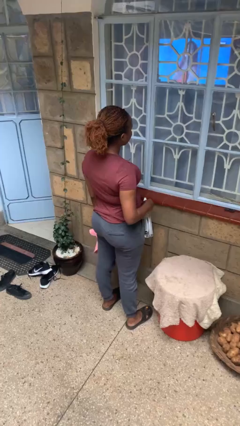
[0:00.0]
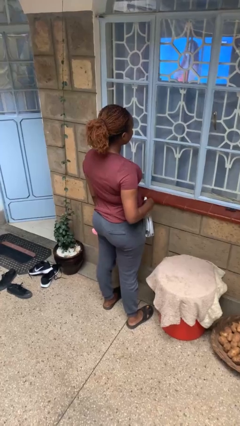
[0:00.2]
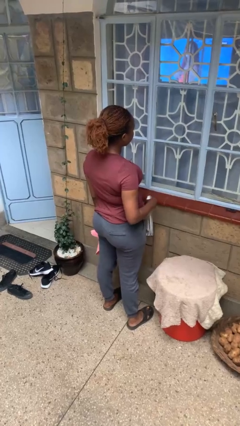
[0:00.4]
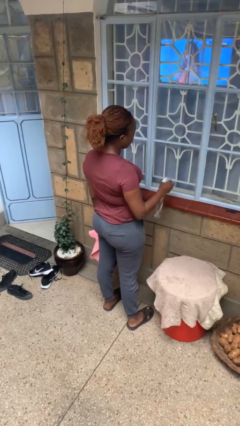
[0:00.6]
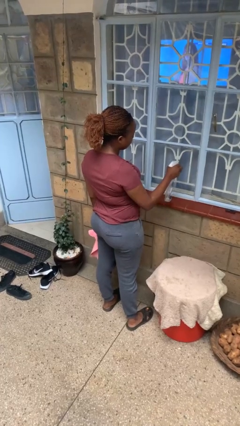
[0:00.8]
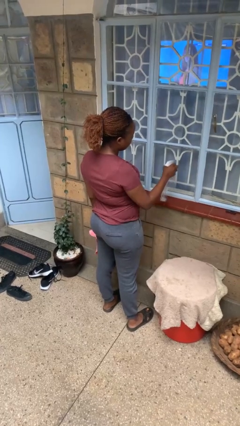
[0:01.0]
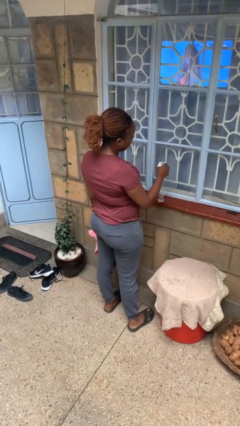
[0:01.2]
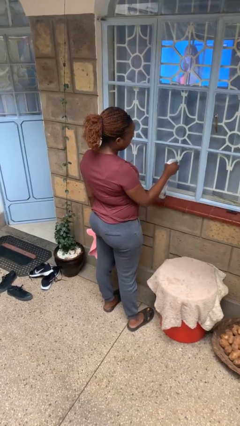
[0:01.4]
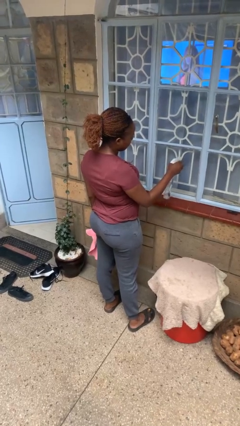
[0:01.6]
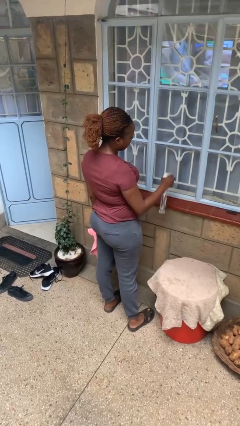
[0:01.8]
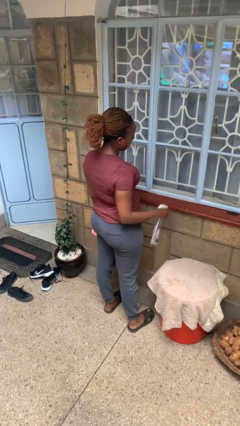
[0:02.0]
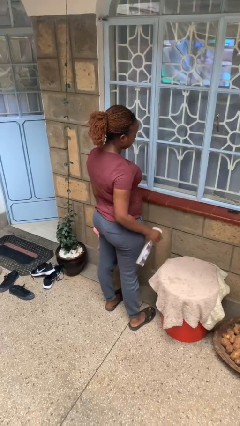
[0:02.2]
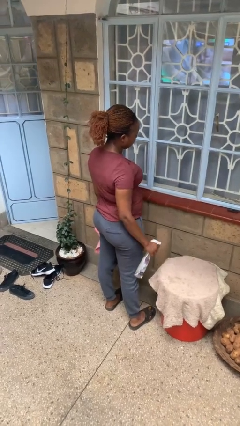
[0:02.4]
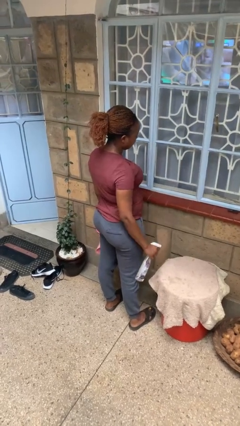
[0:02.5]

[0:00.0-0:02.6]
person sprays from bottle

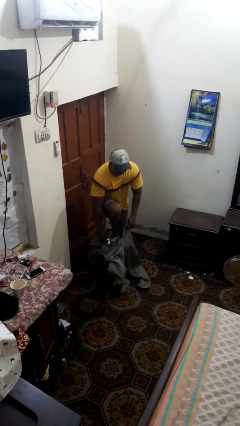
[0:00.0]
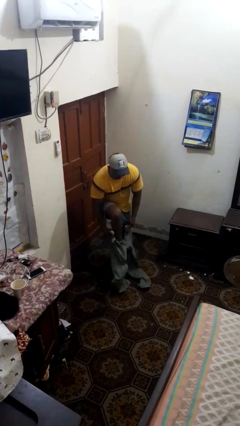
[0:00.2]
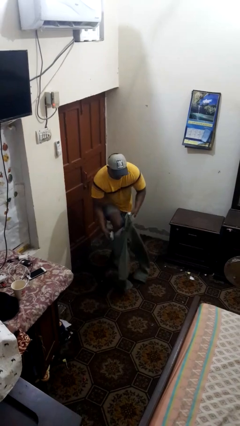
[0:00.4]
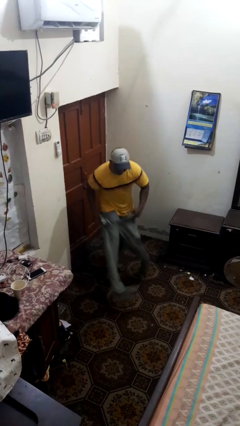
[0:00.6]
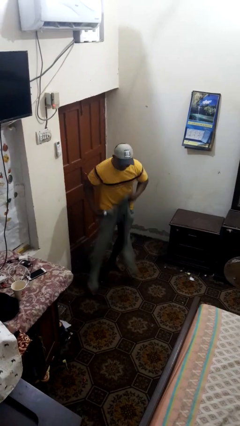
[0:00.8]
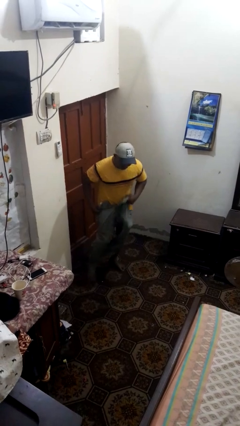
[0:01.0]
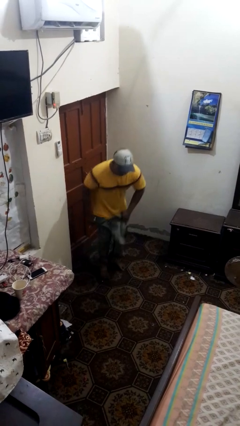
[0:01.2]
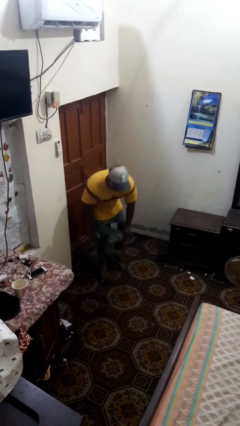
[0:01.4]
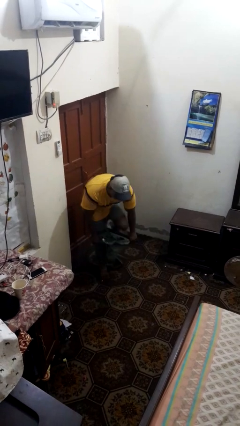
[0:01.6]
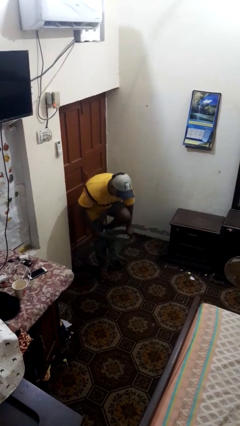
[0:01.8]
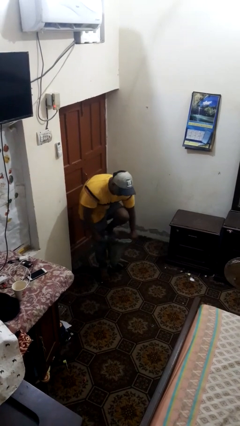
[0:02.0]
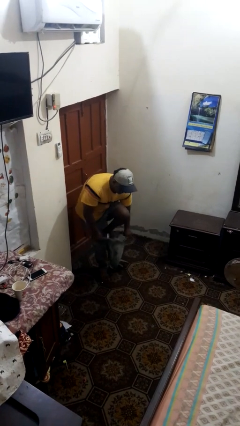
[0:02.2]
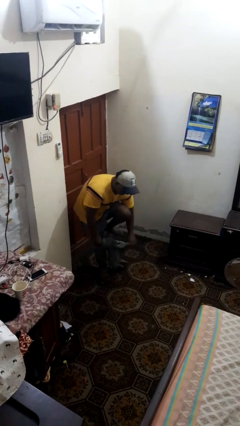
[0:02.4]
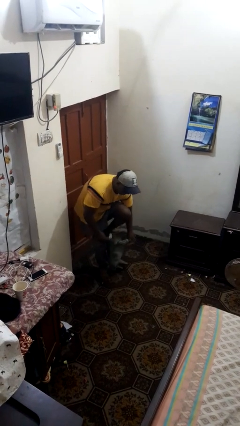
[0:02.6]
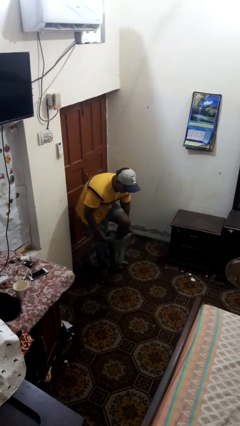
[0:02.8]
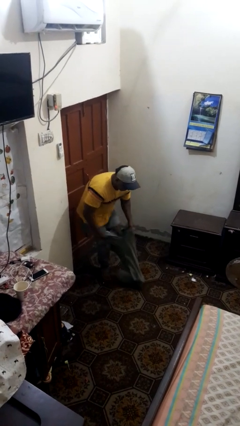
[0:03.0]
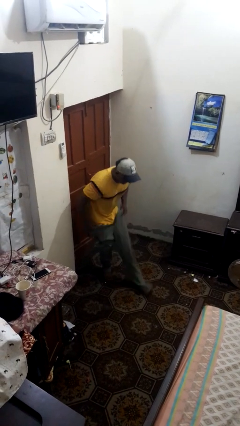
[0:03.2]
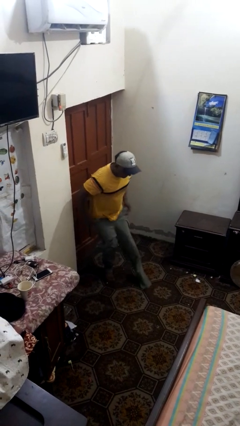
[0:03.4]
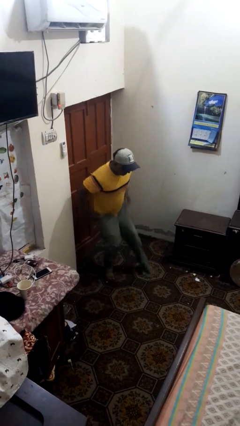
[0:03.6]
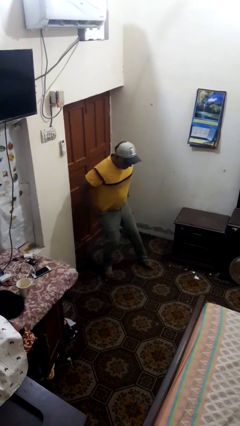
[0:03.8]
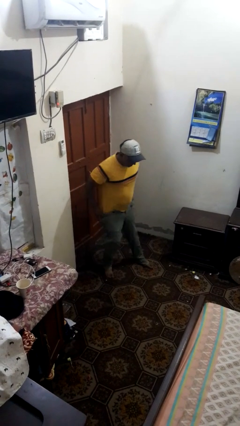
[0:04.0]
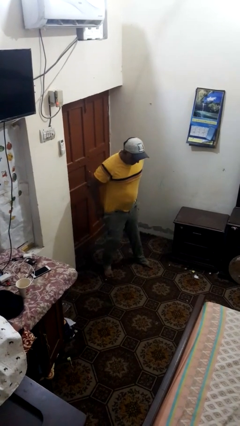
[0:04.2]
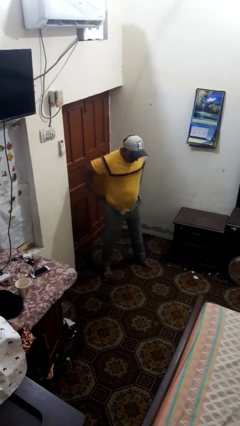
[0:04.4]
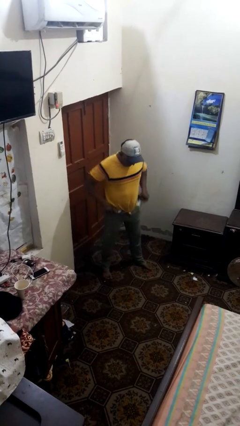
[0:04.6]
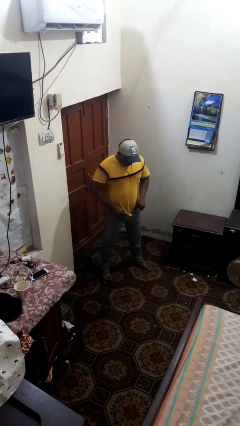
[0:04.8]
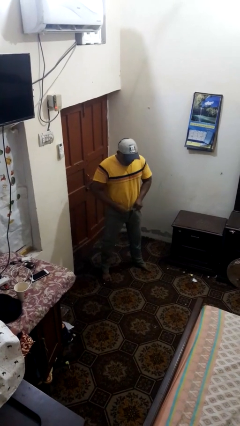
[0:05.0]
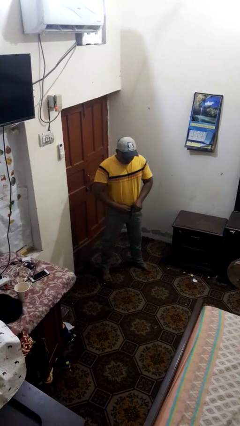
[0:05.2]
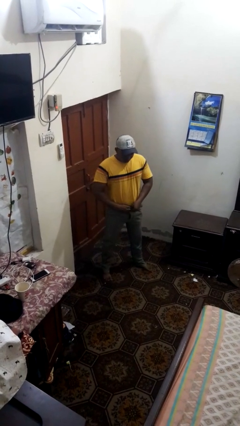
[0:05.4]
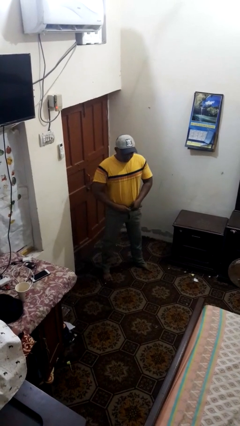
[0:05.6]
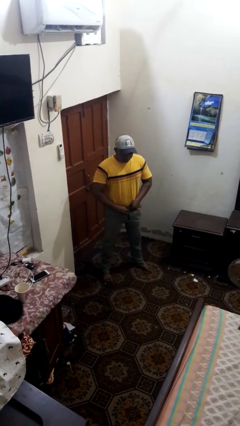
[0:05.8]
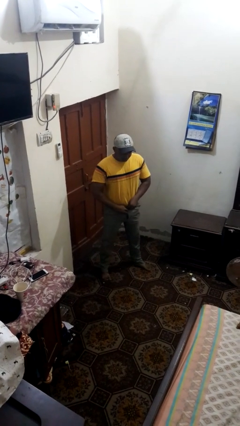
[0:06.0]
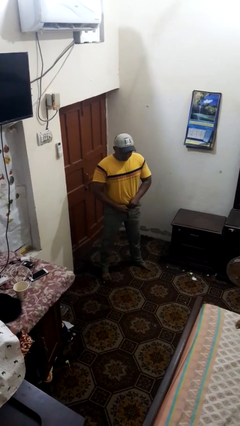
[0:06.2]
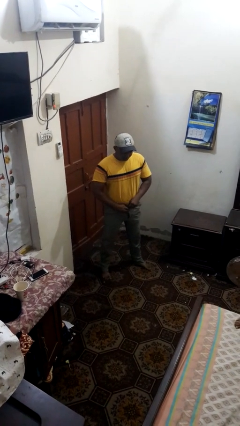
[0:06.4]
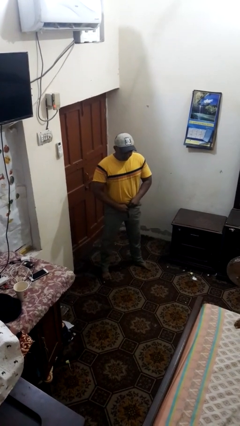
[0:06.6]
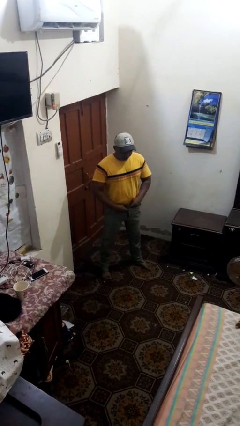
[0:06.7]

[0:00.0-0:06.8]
person puts on pants

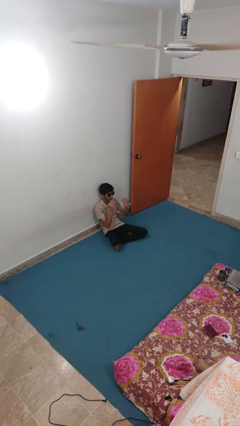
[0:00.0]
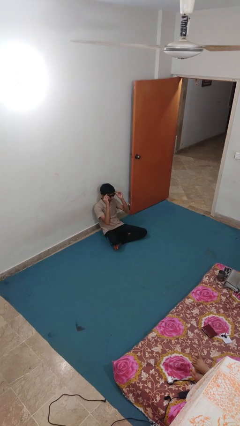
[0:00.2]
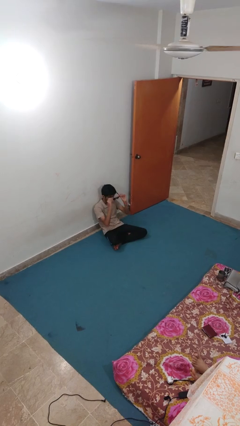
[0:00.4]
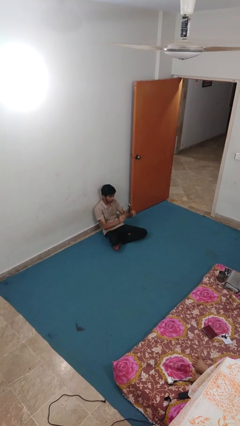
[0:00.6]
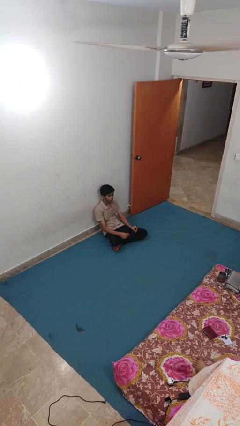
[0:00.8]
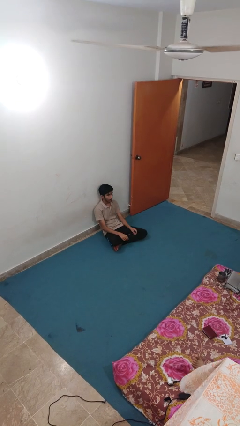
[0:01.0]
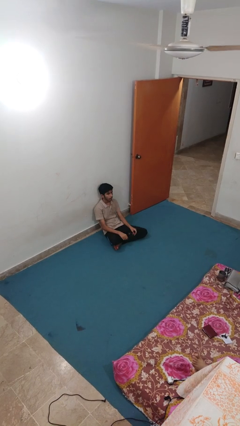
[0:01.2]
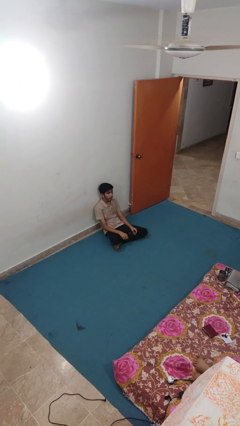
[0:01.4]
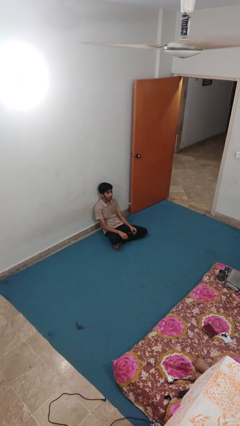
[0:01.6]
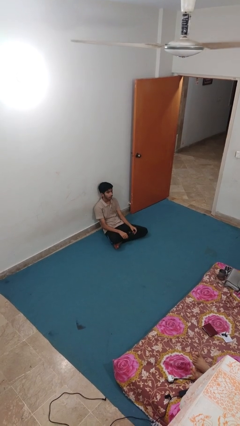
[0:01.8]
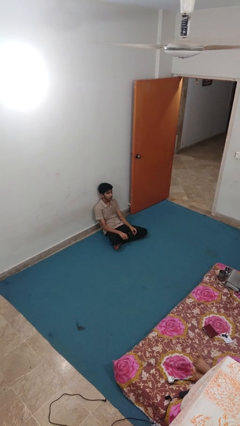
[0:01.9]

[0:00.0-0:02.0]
person takes off sunglasses

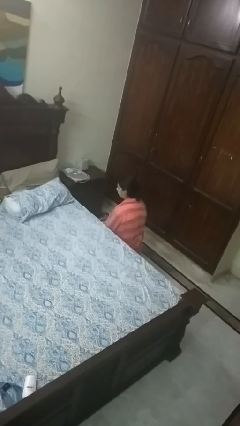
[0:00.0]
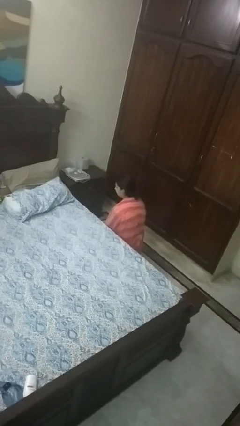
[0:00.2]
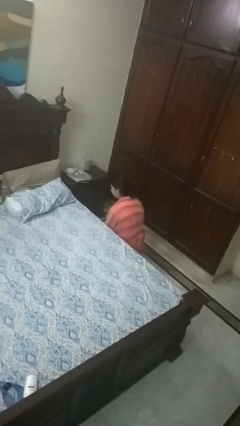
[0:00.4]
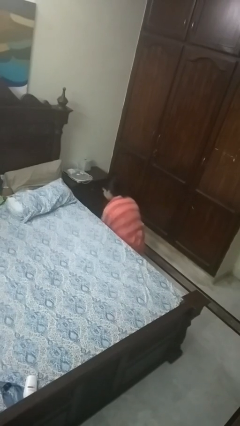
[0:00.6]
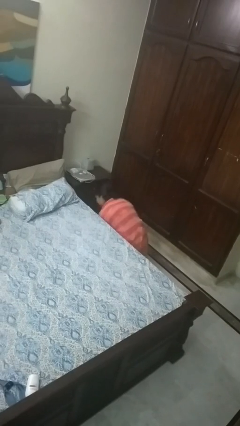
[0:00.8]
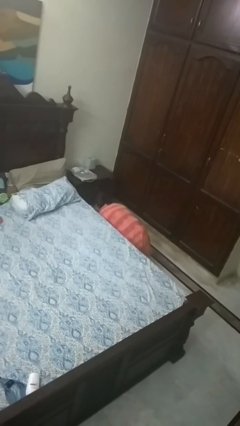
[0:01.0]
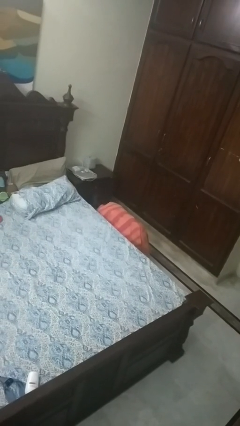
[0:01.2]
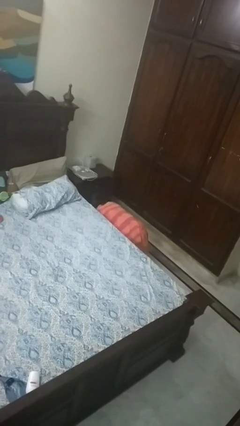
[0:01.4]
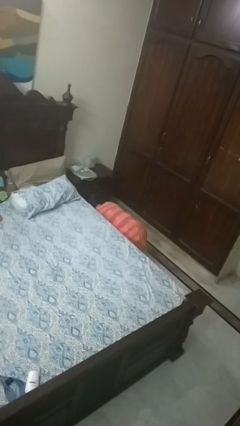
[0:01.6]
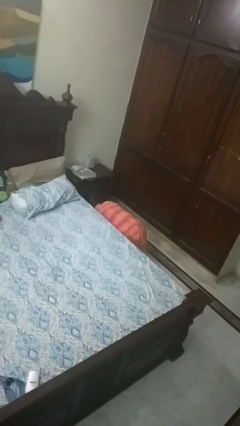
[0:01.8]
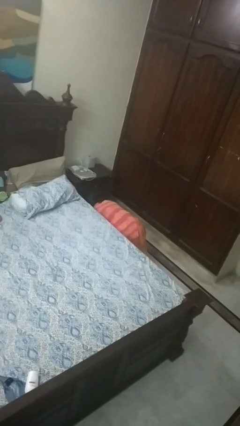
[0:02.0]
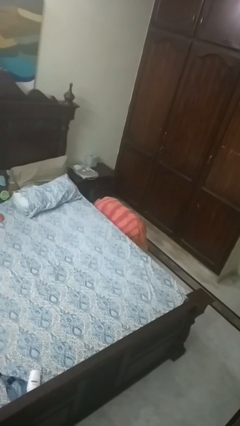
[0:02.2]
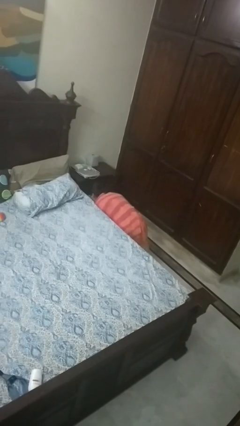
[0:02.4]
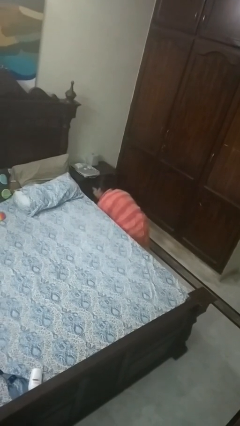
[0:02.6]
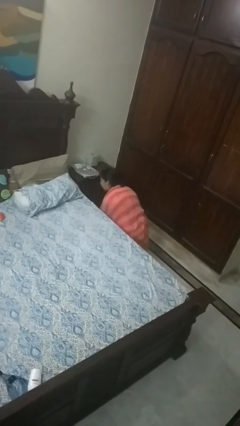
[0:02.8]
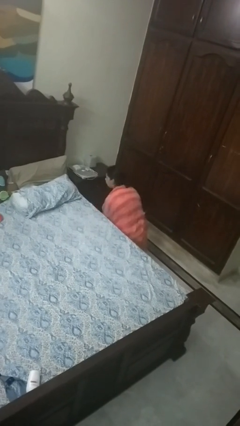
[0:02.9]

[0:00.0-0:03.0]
person searches under bed

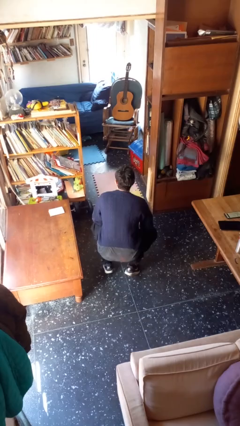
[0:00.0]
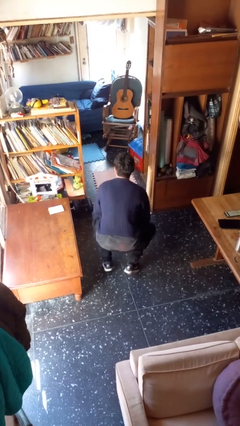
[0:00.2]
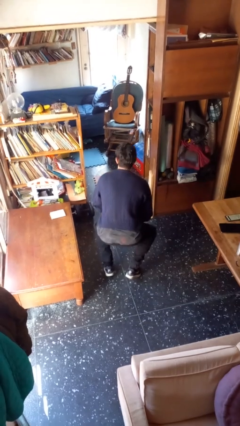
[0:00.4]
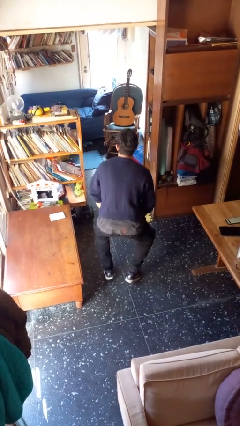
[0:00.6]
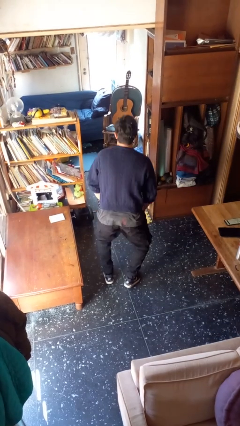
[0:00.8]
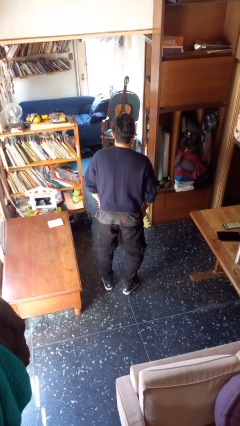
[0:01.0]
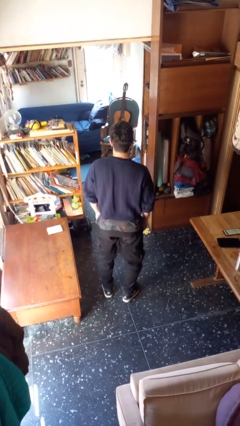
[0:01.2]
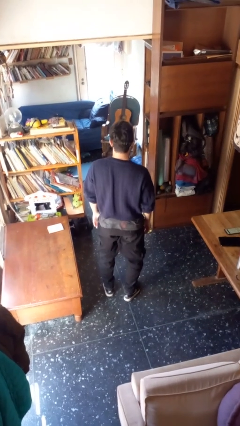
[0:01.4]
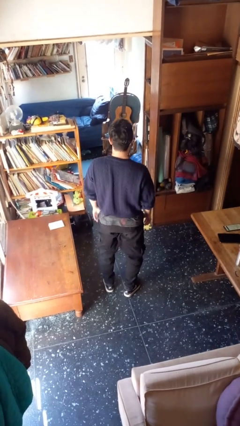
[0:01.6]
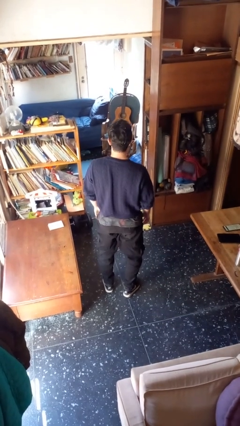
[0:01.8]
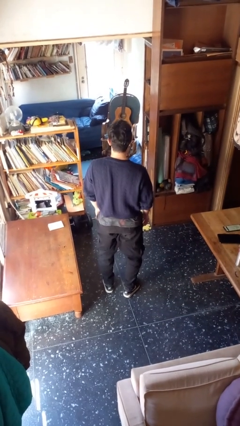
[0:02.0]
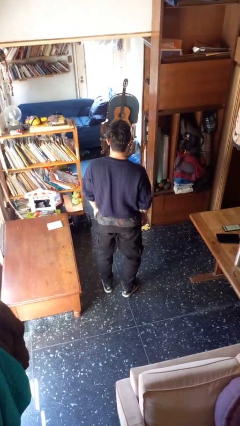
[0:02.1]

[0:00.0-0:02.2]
person stands up

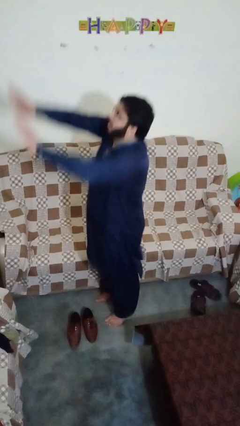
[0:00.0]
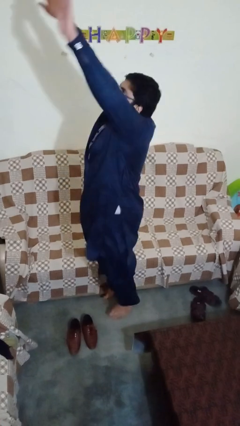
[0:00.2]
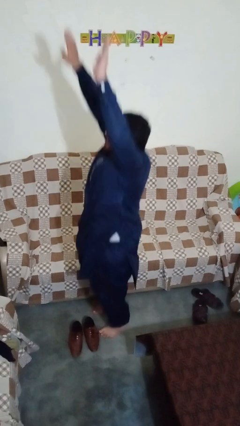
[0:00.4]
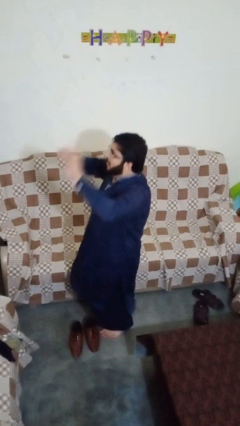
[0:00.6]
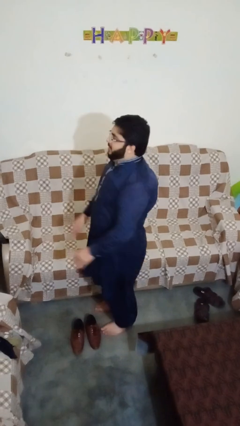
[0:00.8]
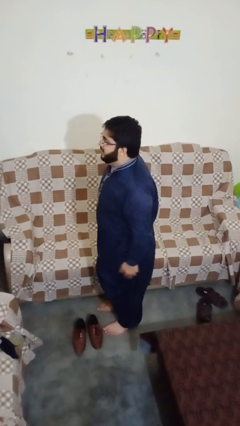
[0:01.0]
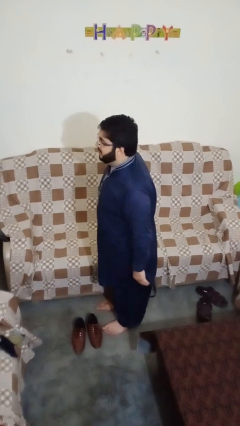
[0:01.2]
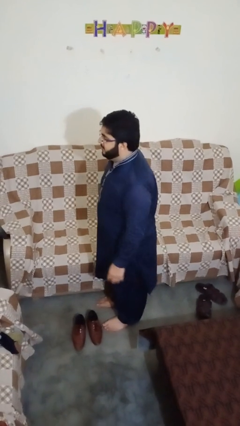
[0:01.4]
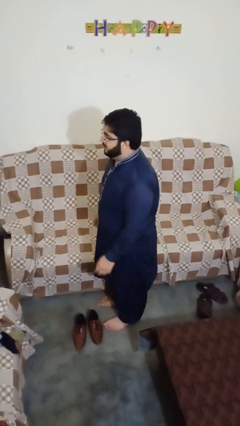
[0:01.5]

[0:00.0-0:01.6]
person jumps
